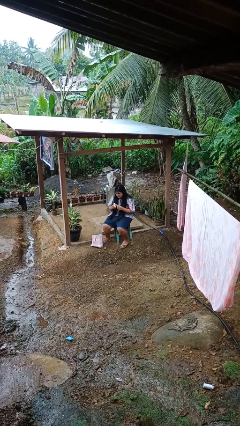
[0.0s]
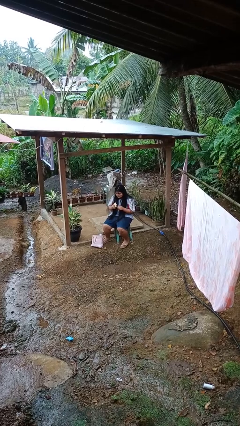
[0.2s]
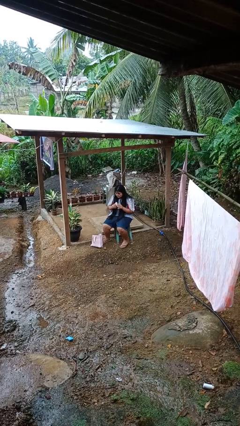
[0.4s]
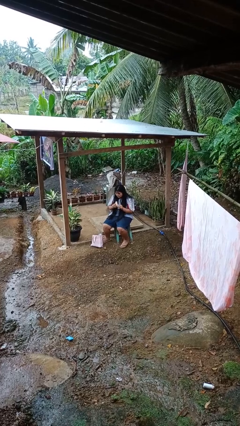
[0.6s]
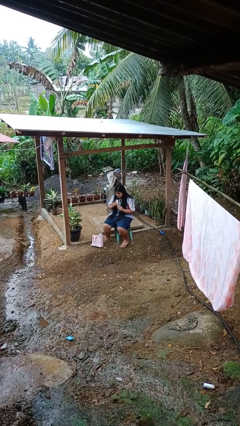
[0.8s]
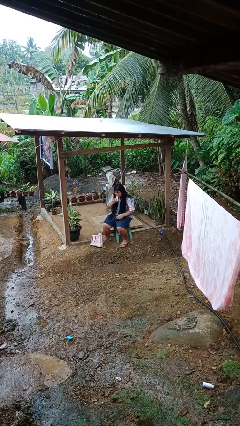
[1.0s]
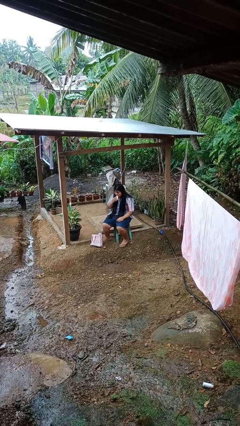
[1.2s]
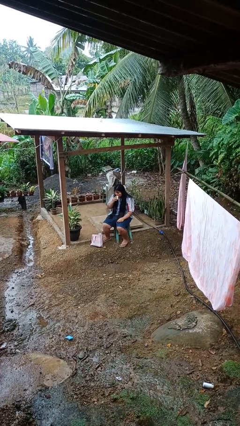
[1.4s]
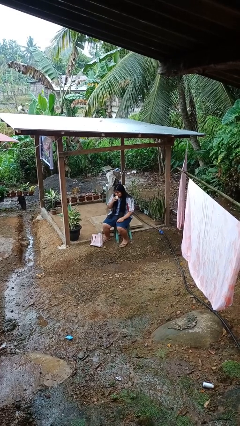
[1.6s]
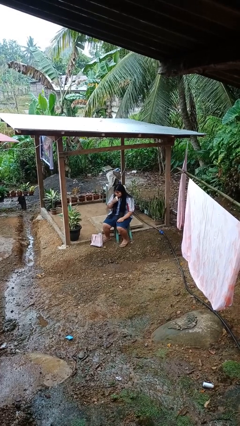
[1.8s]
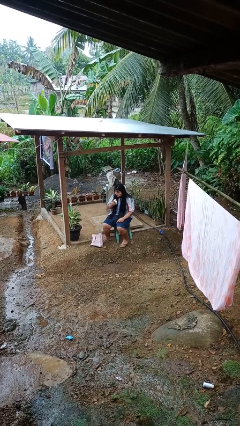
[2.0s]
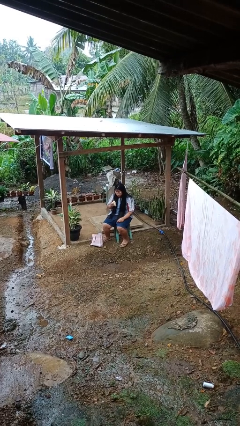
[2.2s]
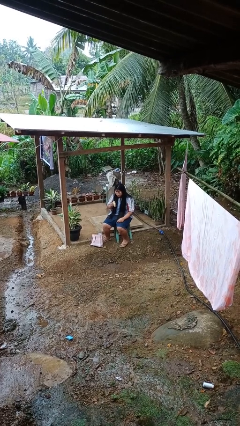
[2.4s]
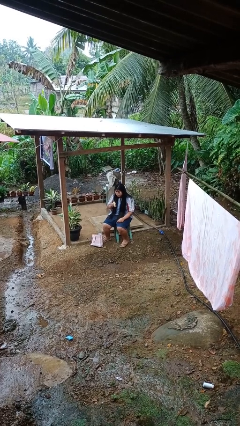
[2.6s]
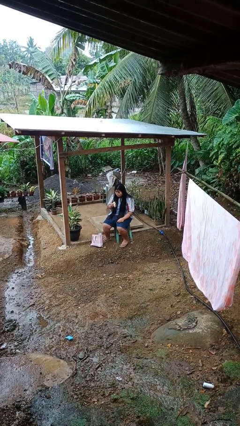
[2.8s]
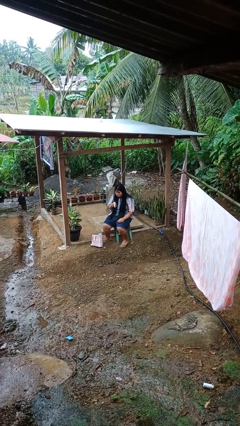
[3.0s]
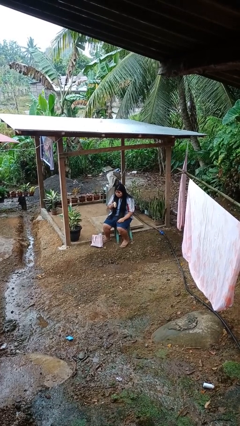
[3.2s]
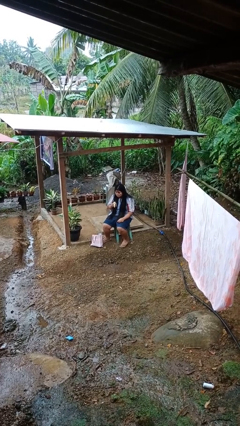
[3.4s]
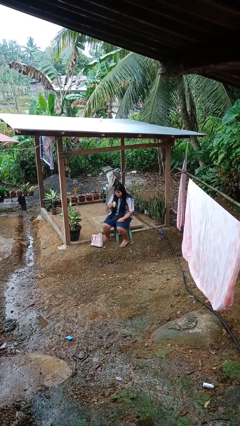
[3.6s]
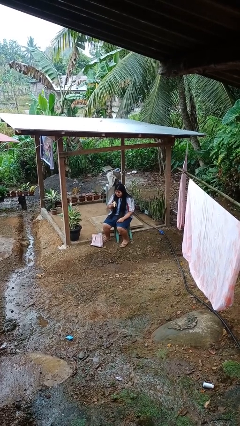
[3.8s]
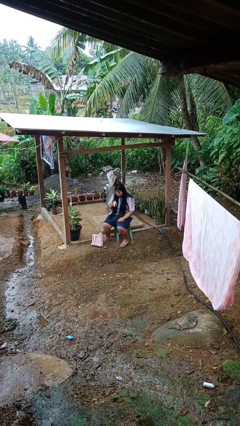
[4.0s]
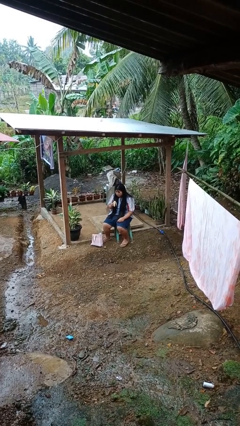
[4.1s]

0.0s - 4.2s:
person eats banana

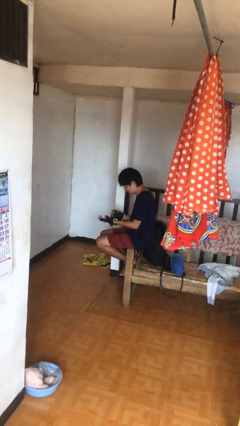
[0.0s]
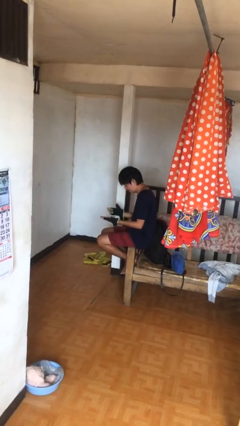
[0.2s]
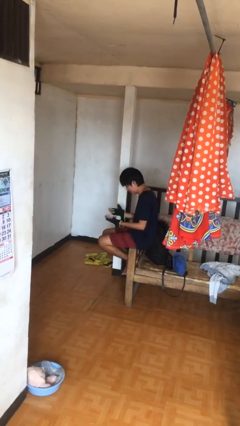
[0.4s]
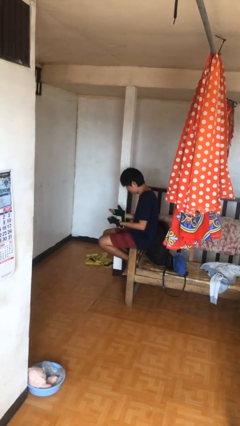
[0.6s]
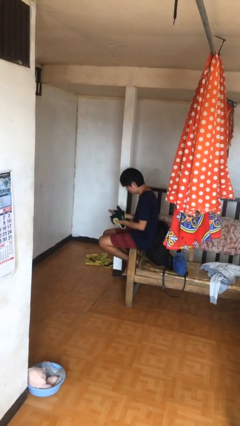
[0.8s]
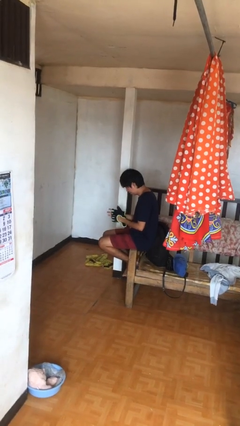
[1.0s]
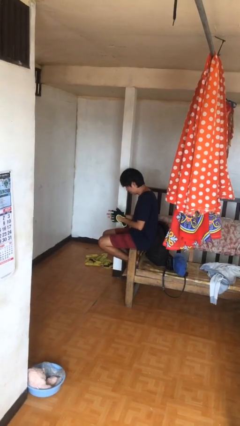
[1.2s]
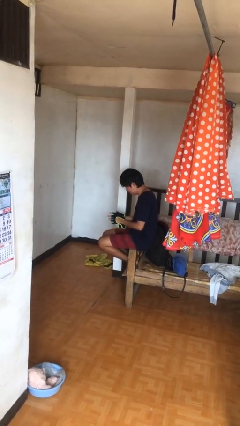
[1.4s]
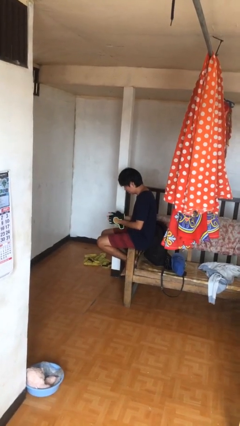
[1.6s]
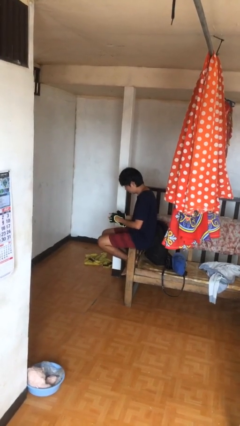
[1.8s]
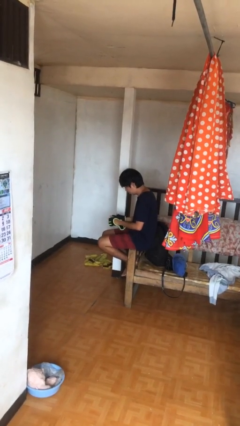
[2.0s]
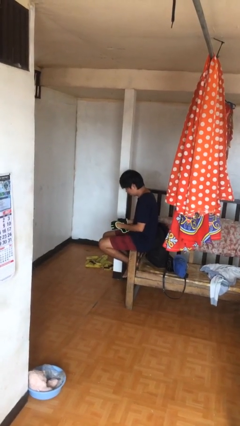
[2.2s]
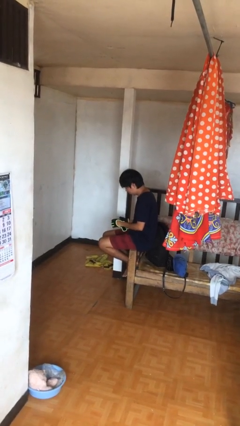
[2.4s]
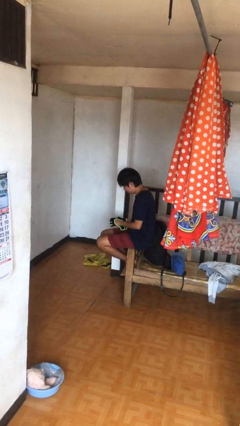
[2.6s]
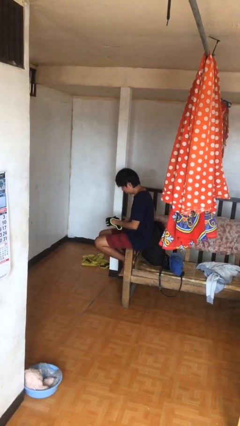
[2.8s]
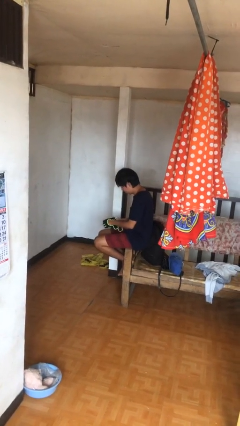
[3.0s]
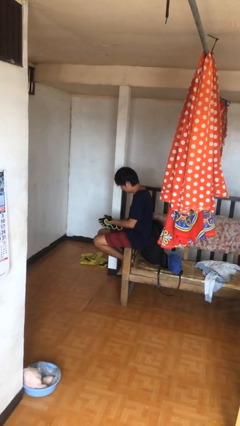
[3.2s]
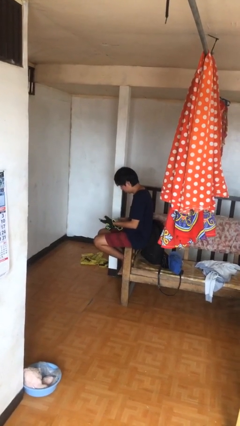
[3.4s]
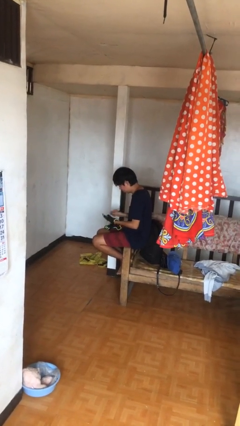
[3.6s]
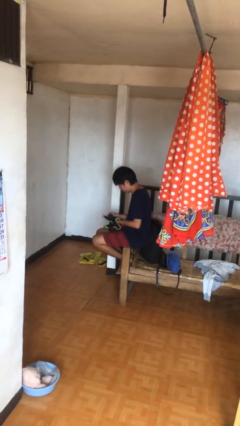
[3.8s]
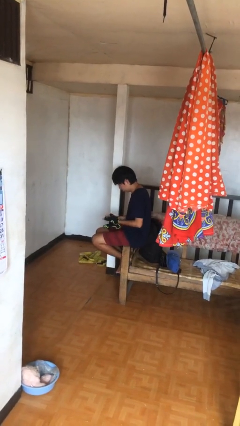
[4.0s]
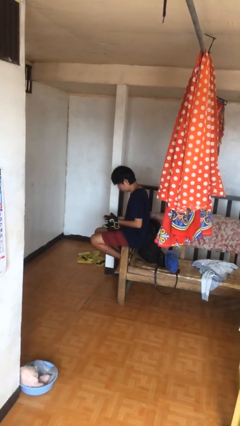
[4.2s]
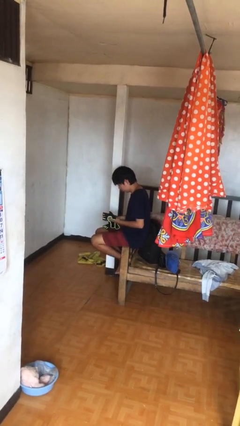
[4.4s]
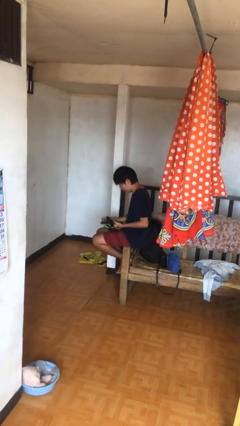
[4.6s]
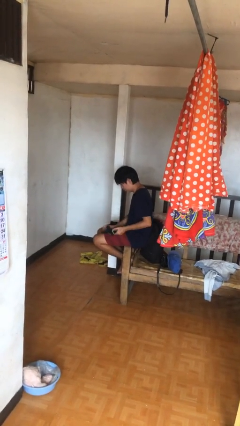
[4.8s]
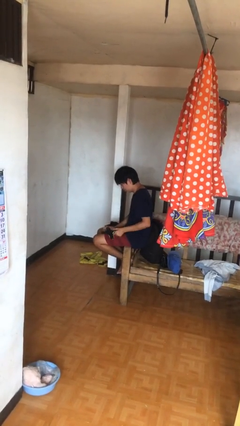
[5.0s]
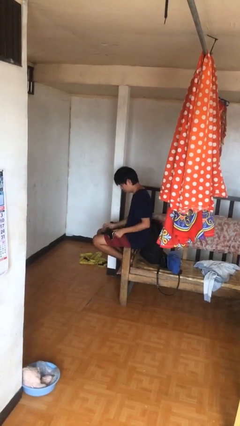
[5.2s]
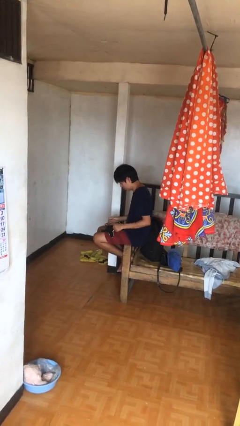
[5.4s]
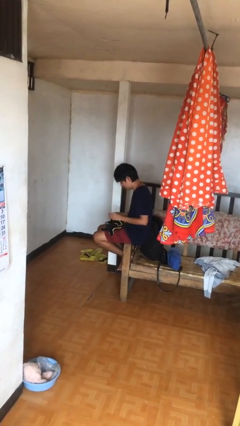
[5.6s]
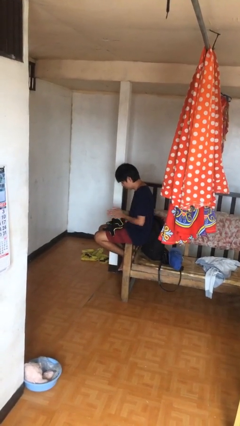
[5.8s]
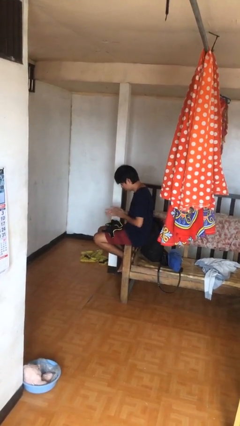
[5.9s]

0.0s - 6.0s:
person takes off gloves

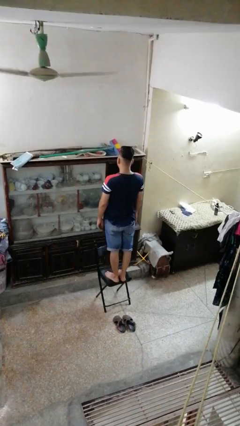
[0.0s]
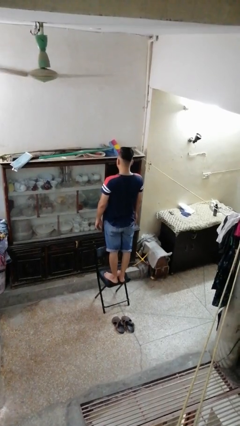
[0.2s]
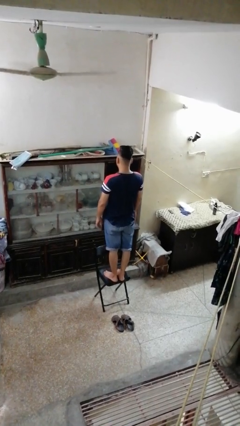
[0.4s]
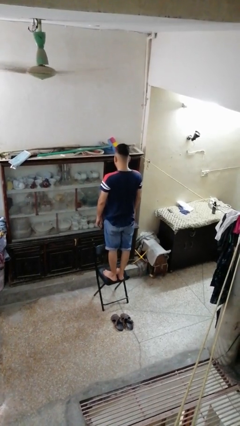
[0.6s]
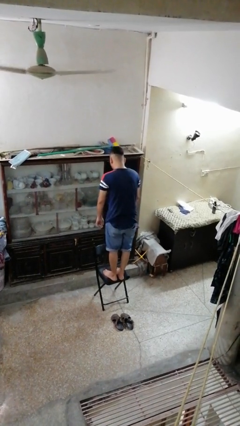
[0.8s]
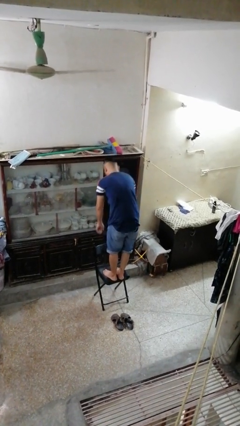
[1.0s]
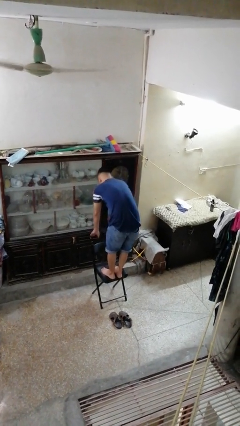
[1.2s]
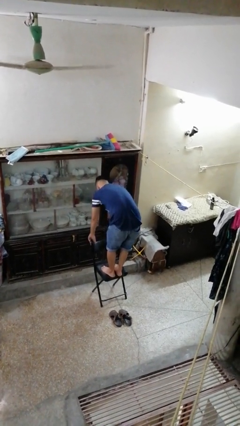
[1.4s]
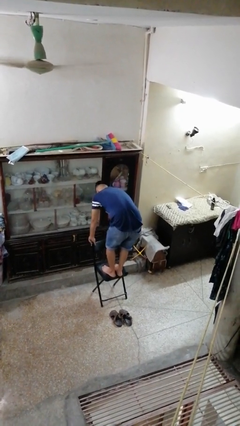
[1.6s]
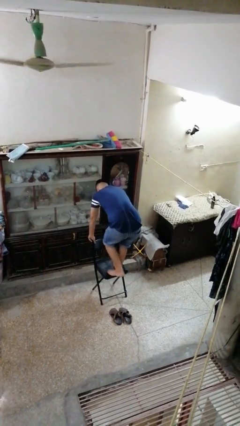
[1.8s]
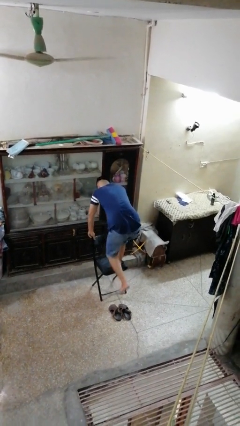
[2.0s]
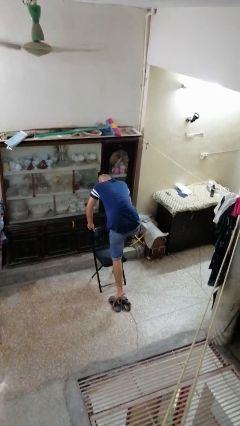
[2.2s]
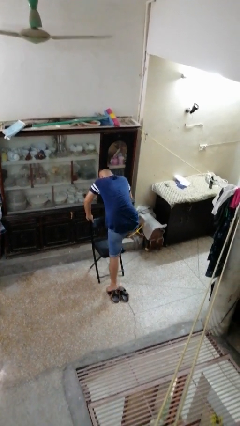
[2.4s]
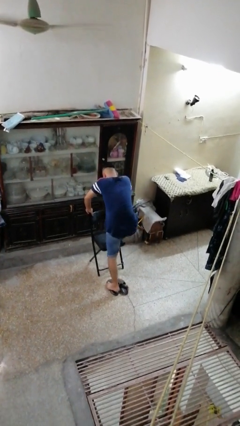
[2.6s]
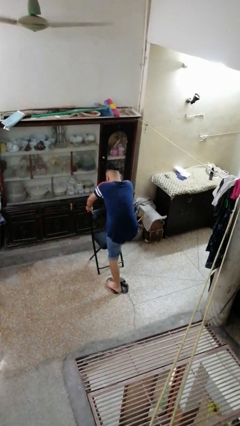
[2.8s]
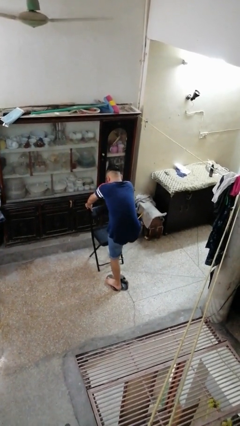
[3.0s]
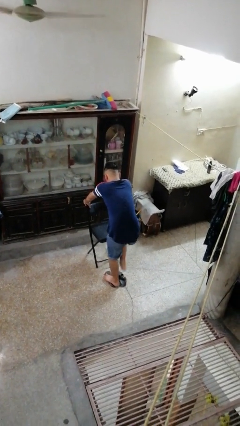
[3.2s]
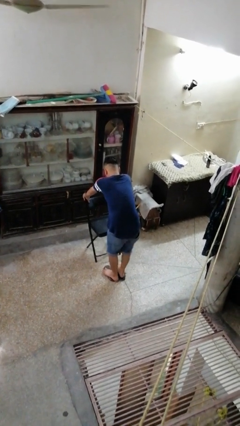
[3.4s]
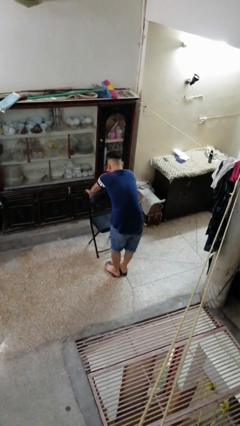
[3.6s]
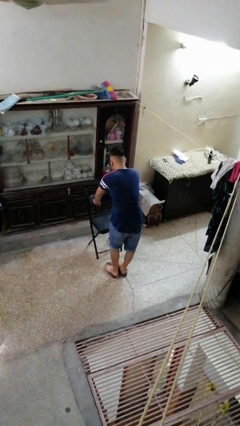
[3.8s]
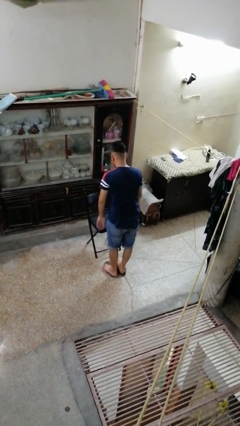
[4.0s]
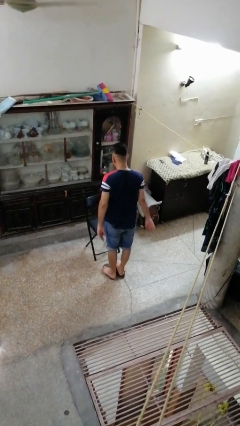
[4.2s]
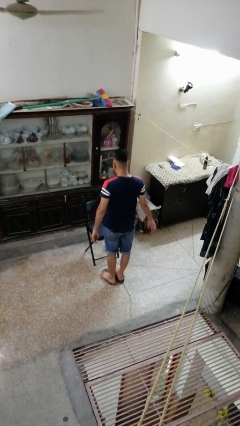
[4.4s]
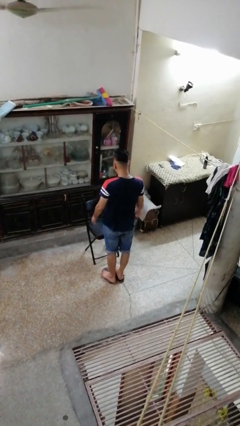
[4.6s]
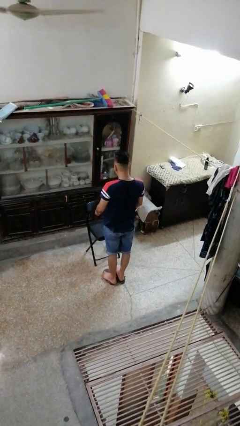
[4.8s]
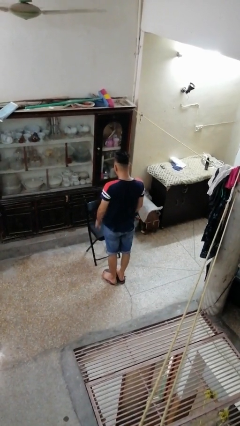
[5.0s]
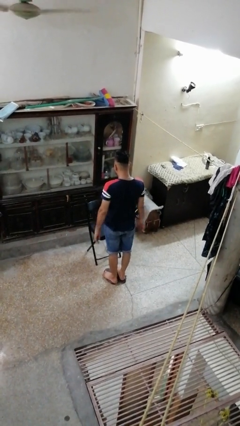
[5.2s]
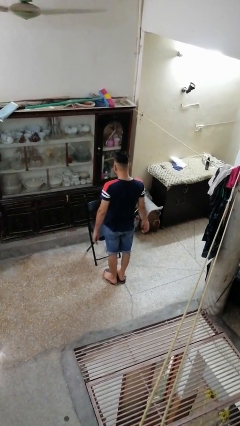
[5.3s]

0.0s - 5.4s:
person climbs off chair

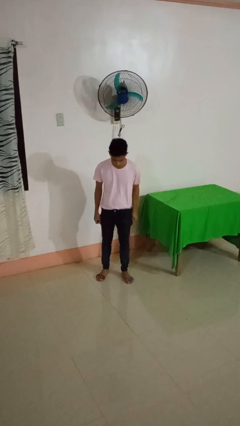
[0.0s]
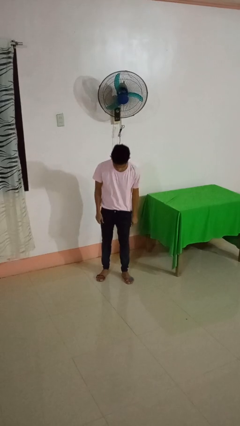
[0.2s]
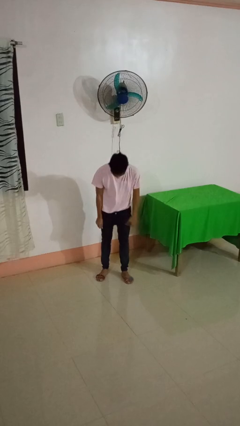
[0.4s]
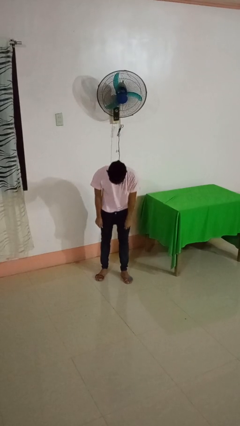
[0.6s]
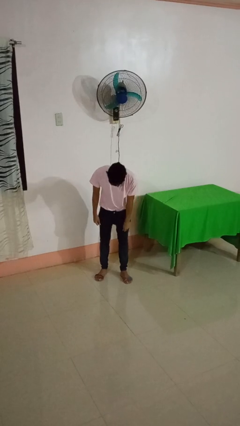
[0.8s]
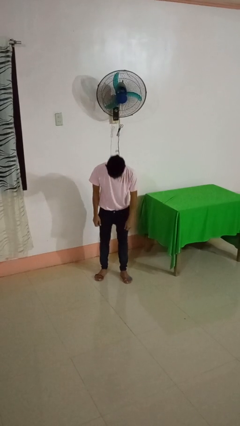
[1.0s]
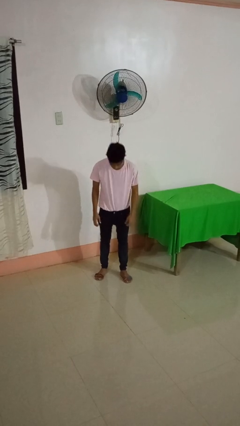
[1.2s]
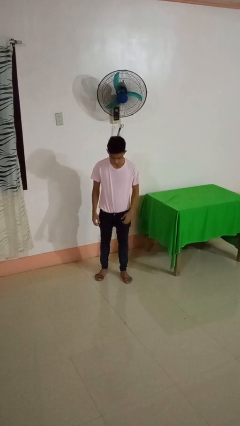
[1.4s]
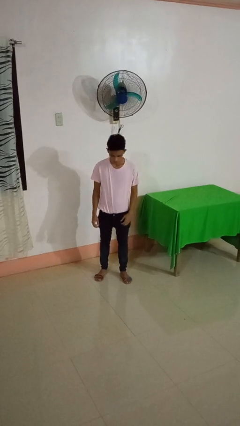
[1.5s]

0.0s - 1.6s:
person hikes up pants

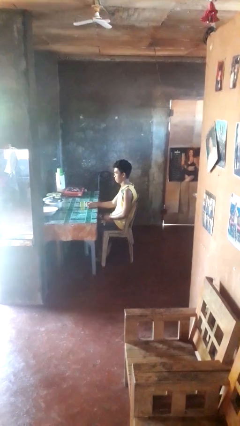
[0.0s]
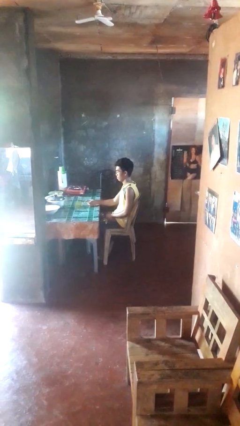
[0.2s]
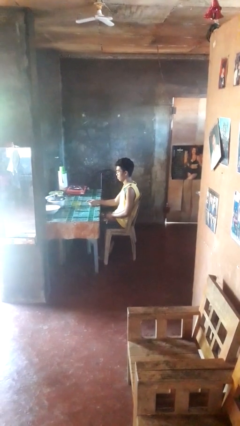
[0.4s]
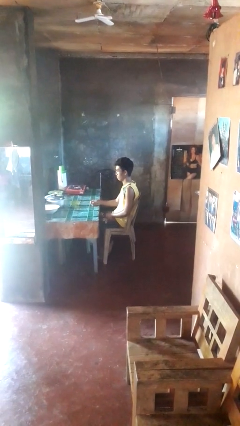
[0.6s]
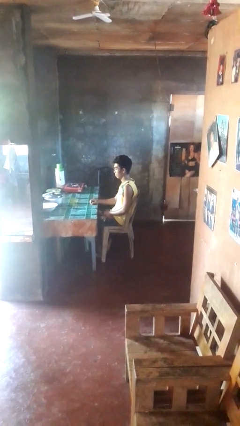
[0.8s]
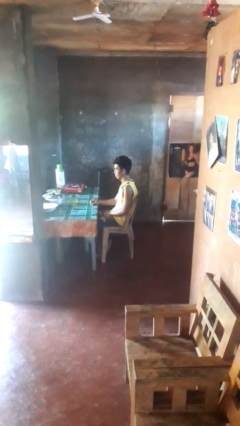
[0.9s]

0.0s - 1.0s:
person knocks over glass
